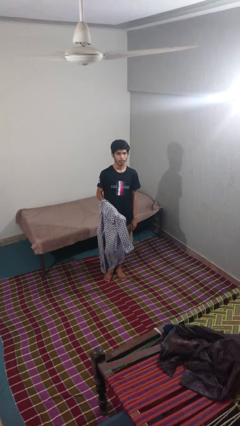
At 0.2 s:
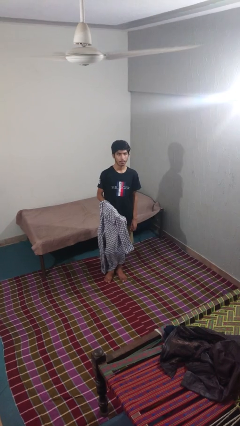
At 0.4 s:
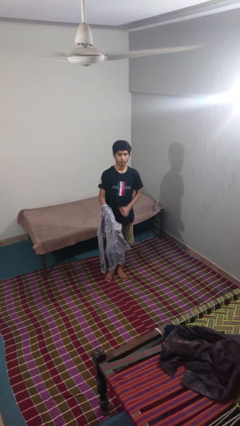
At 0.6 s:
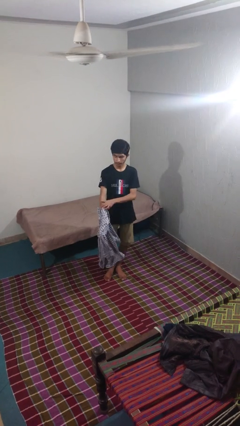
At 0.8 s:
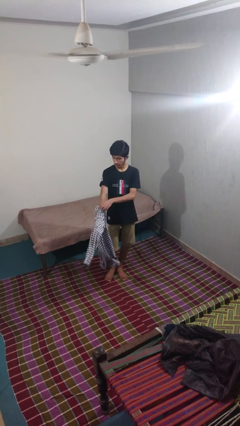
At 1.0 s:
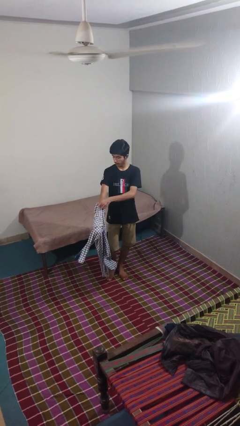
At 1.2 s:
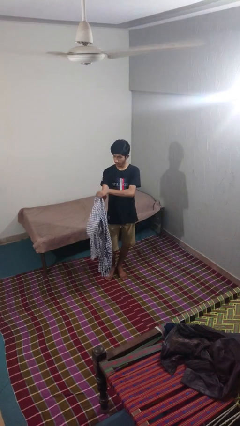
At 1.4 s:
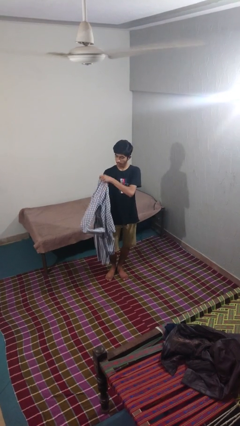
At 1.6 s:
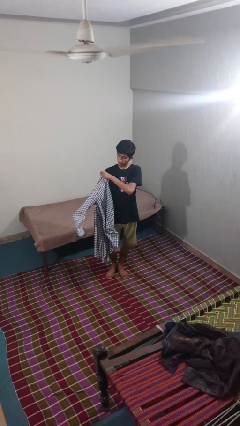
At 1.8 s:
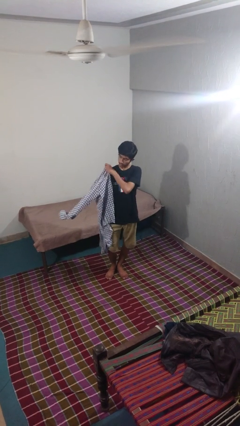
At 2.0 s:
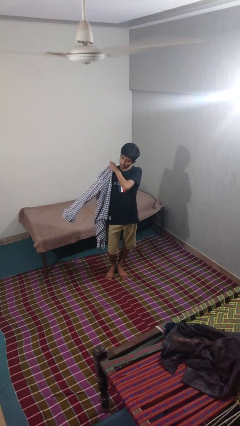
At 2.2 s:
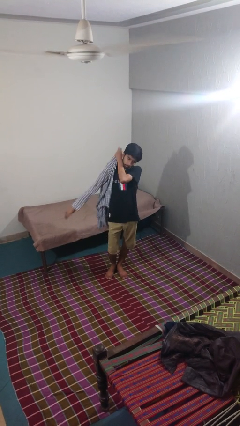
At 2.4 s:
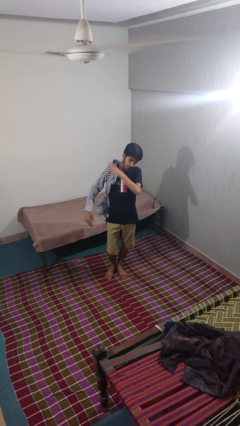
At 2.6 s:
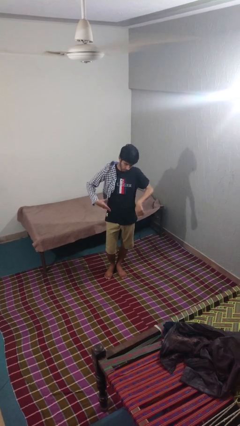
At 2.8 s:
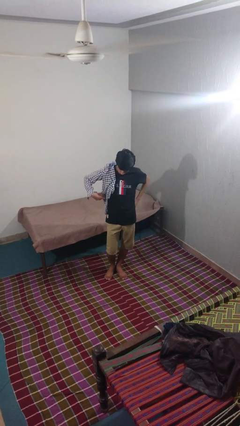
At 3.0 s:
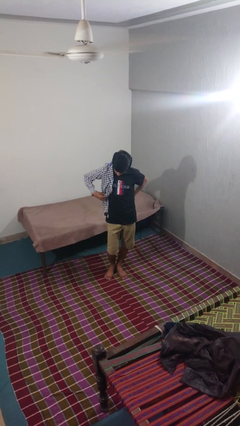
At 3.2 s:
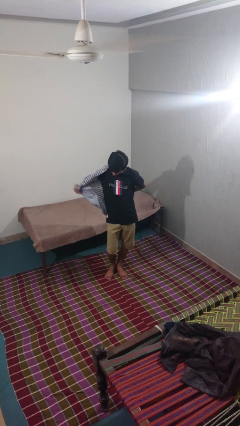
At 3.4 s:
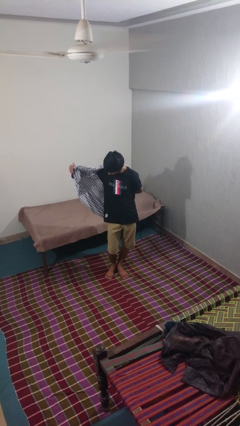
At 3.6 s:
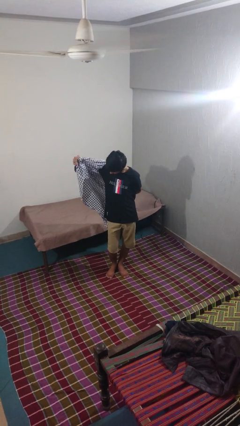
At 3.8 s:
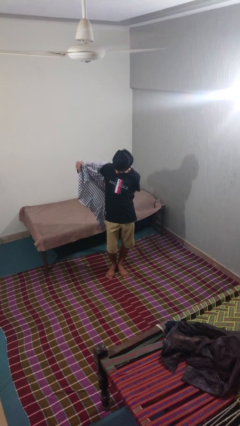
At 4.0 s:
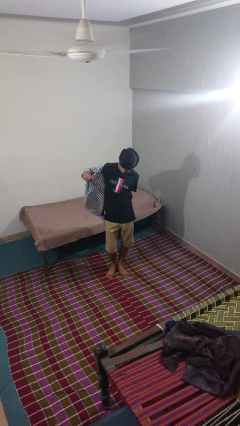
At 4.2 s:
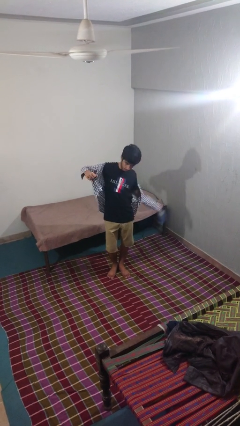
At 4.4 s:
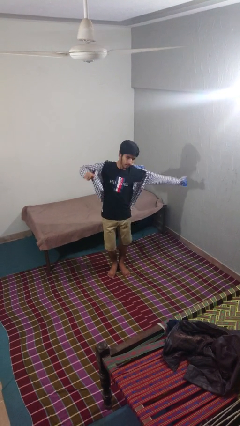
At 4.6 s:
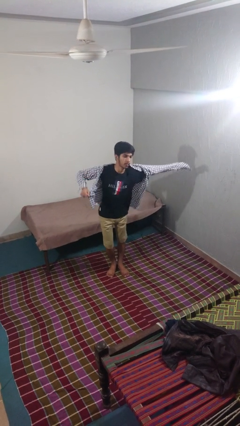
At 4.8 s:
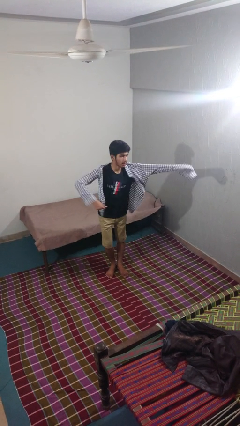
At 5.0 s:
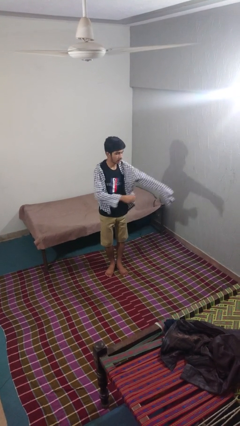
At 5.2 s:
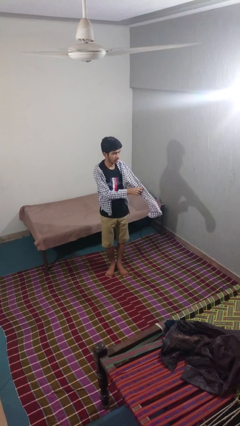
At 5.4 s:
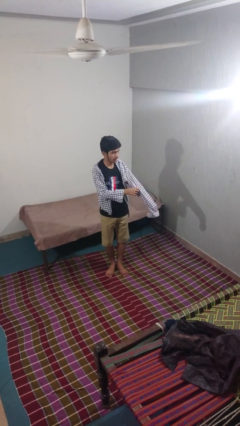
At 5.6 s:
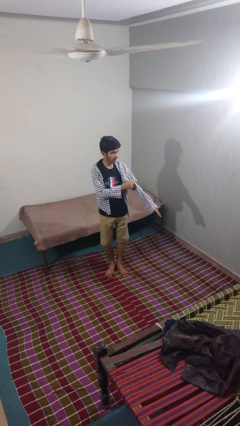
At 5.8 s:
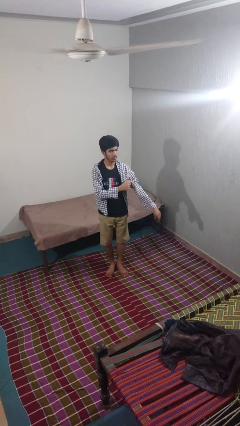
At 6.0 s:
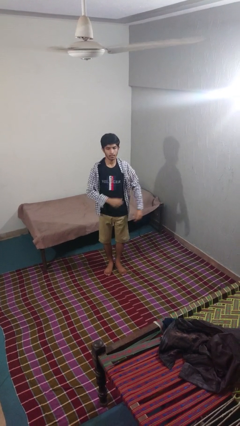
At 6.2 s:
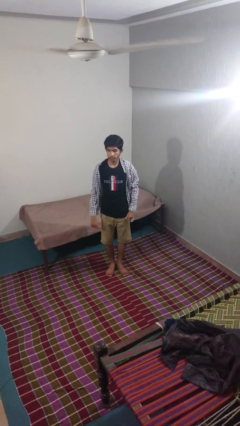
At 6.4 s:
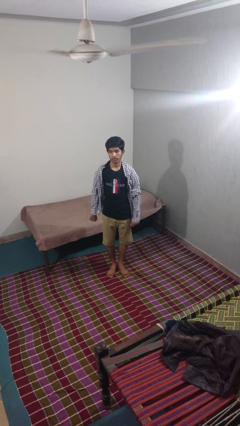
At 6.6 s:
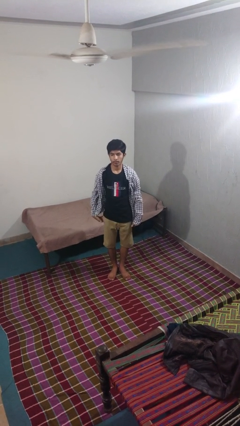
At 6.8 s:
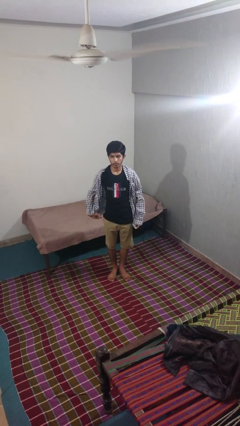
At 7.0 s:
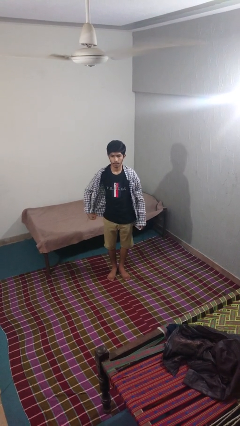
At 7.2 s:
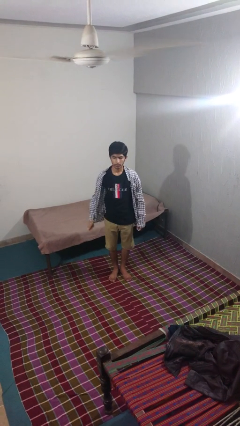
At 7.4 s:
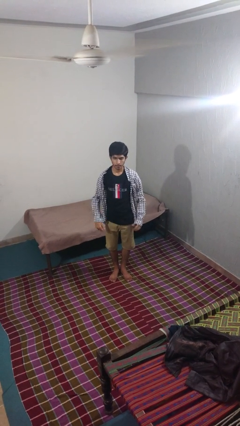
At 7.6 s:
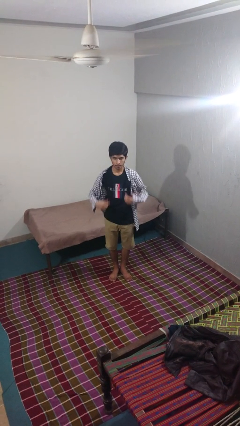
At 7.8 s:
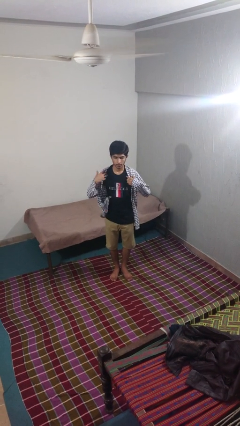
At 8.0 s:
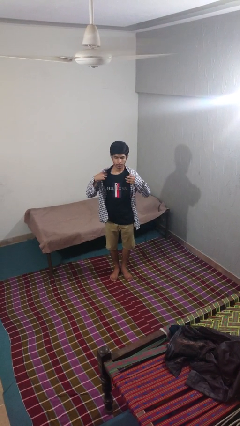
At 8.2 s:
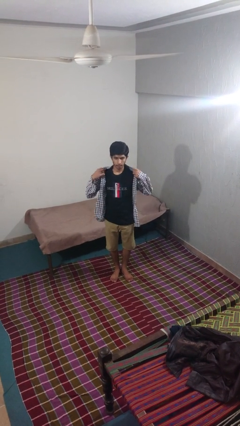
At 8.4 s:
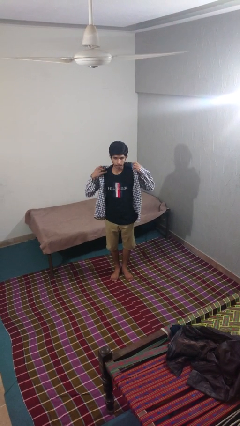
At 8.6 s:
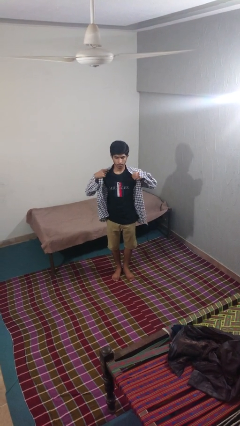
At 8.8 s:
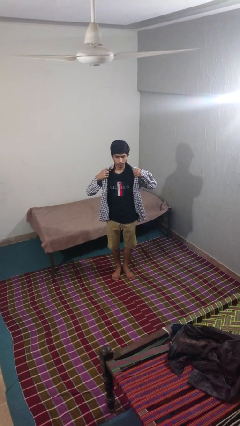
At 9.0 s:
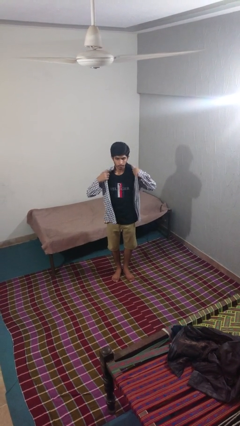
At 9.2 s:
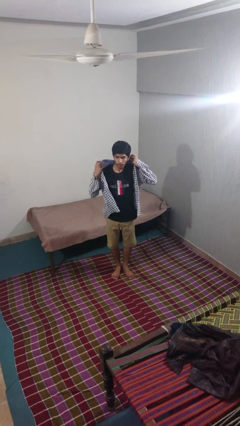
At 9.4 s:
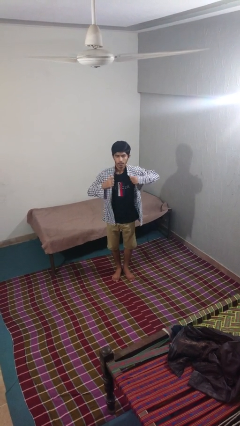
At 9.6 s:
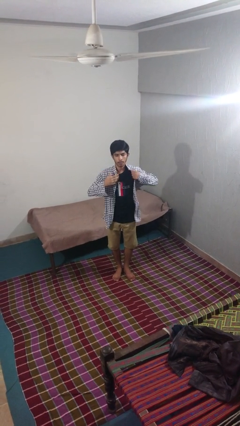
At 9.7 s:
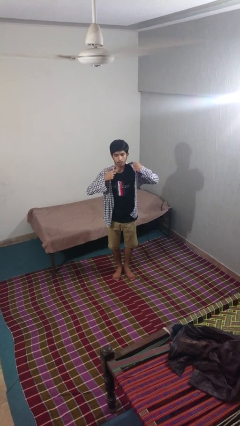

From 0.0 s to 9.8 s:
person puts on shirt

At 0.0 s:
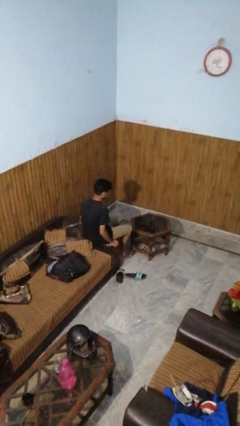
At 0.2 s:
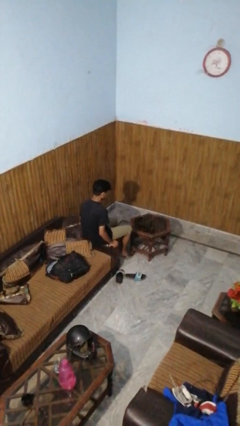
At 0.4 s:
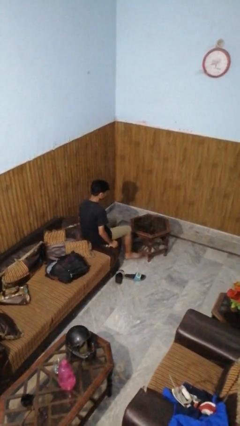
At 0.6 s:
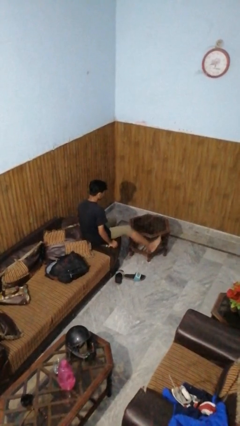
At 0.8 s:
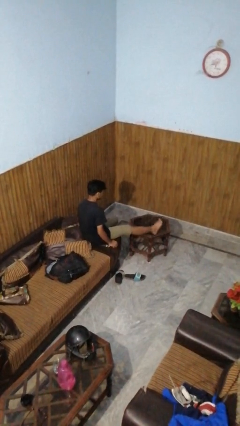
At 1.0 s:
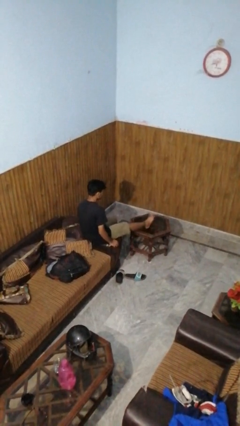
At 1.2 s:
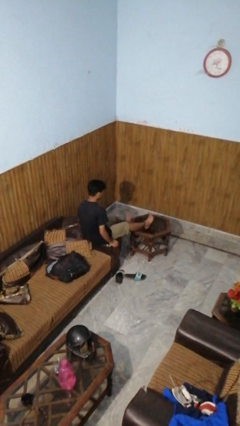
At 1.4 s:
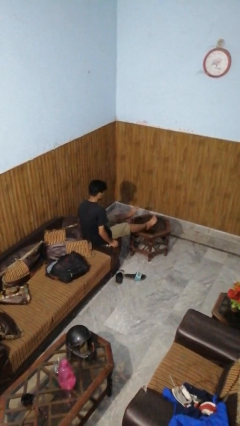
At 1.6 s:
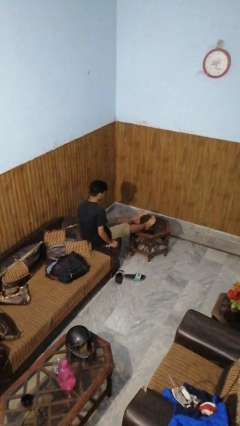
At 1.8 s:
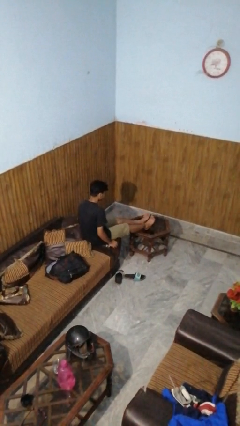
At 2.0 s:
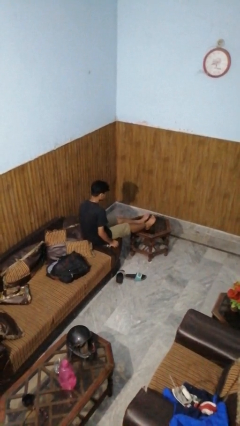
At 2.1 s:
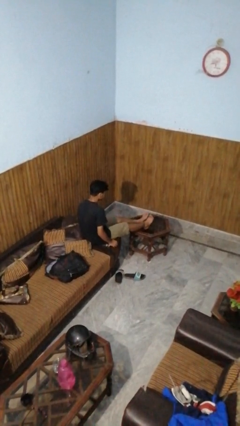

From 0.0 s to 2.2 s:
person puts feet up

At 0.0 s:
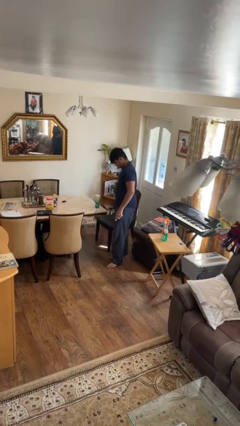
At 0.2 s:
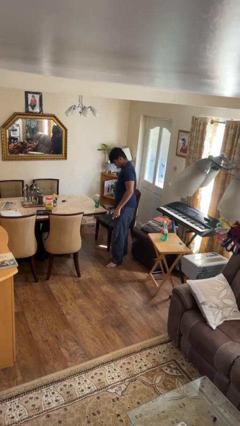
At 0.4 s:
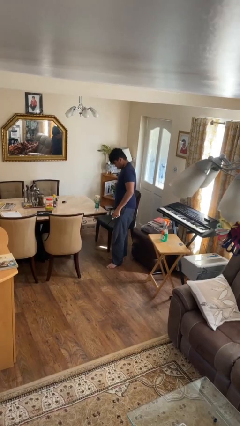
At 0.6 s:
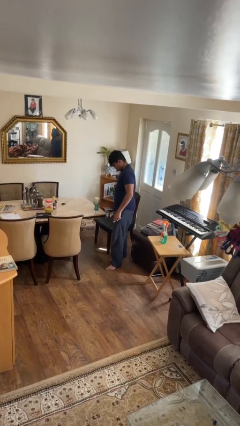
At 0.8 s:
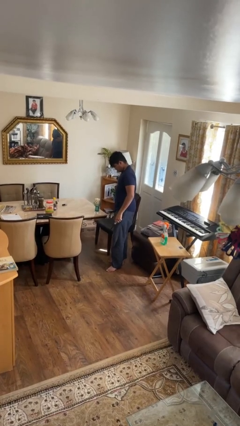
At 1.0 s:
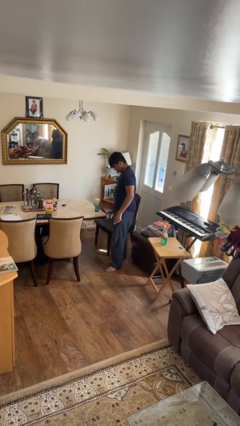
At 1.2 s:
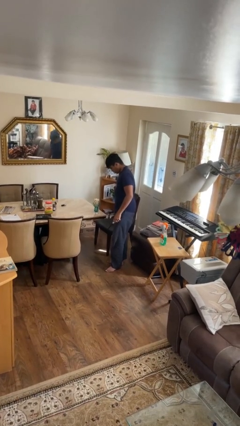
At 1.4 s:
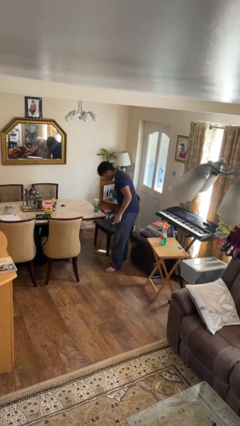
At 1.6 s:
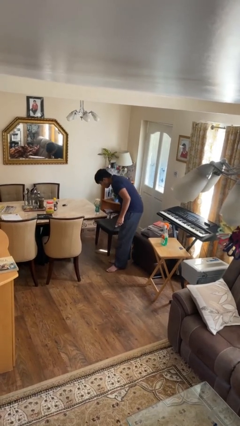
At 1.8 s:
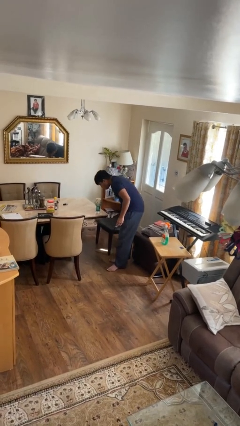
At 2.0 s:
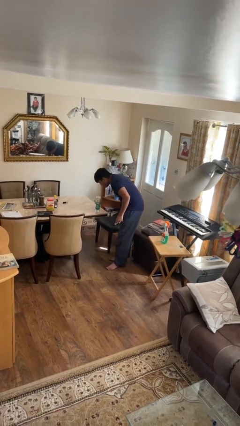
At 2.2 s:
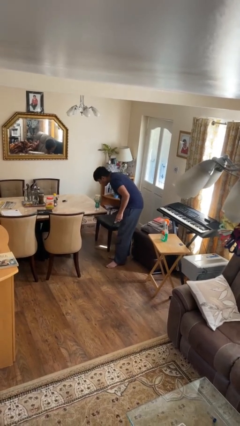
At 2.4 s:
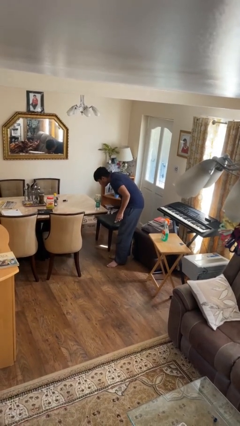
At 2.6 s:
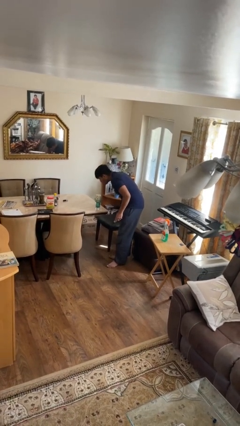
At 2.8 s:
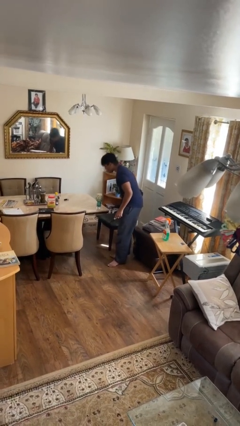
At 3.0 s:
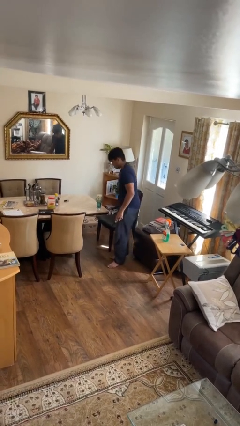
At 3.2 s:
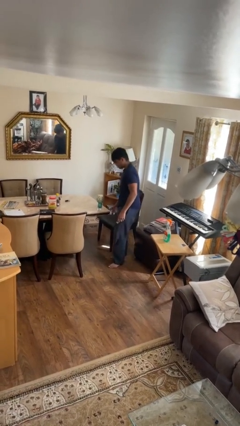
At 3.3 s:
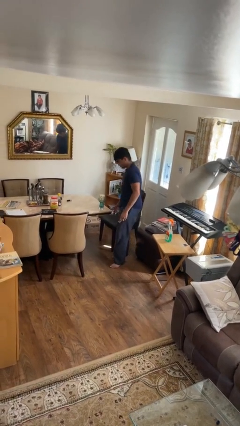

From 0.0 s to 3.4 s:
person extinguishes candle

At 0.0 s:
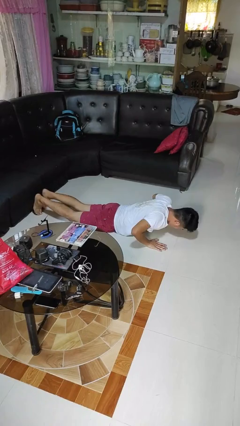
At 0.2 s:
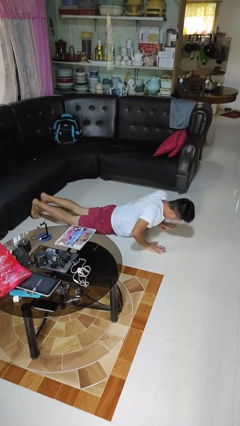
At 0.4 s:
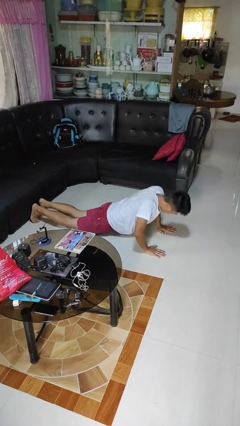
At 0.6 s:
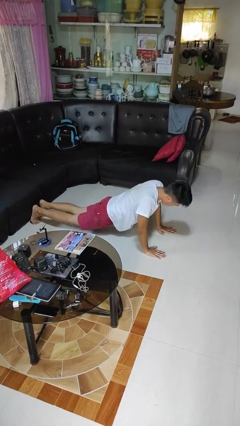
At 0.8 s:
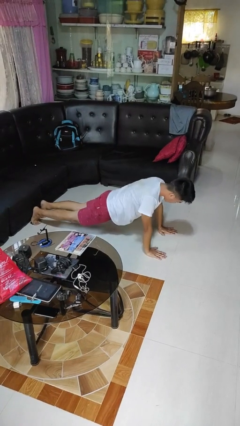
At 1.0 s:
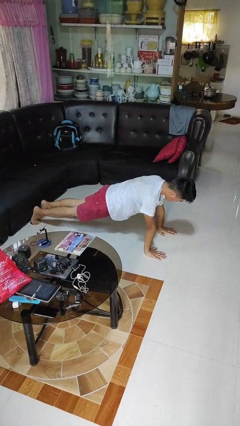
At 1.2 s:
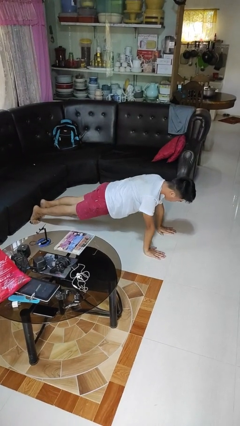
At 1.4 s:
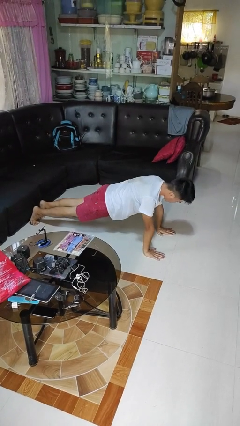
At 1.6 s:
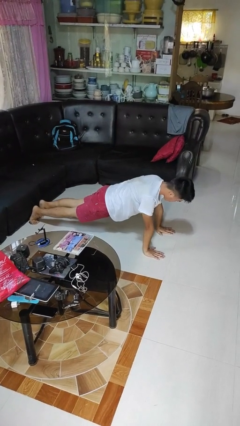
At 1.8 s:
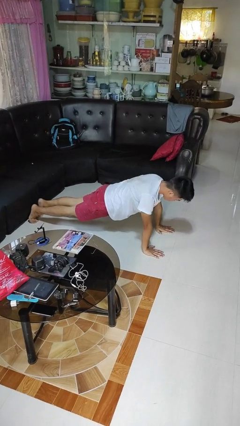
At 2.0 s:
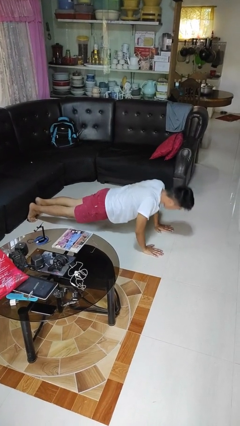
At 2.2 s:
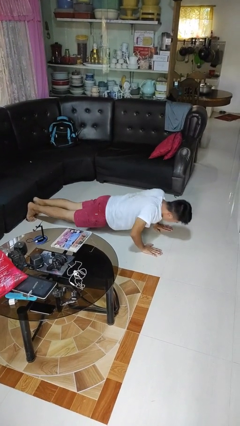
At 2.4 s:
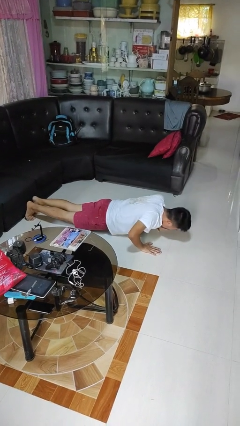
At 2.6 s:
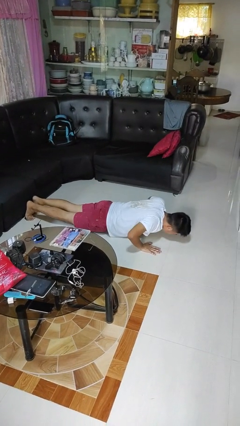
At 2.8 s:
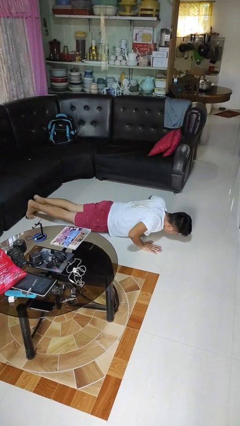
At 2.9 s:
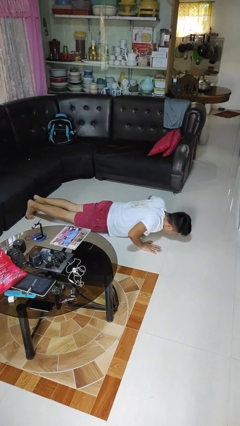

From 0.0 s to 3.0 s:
person exercises with pushup
